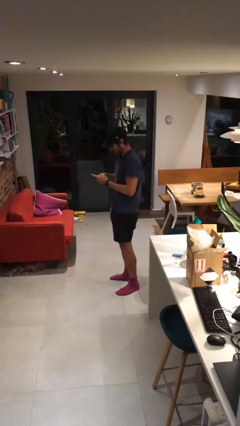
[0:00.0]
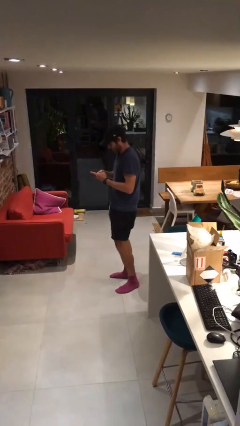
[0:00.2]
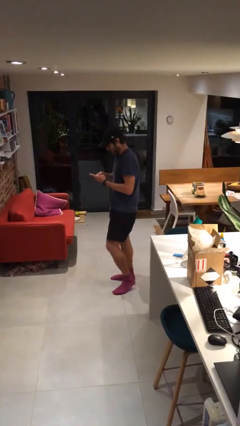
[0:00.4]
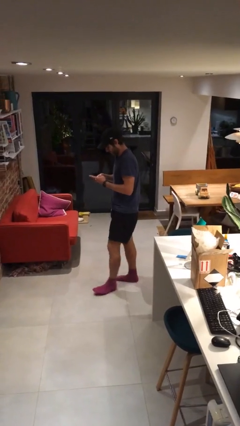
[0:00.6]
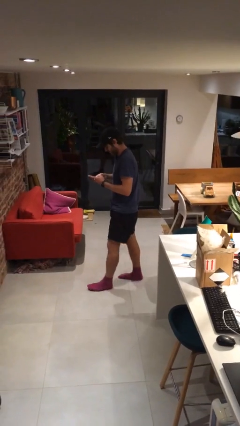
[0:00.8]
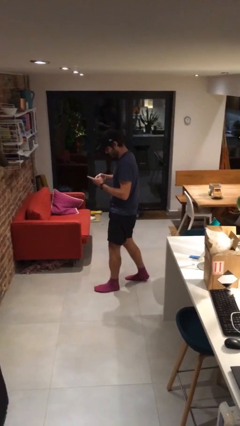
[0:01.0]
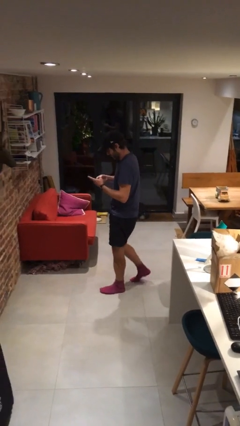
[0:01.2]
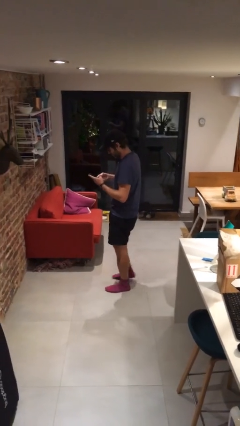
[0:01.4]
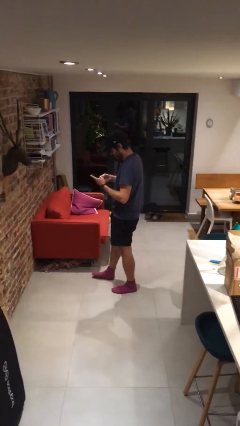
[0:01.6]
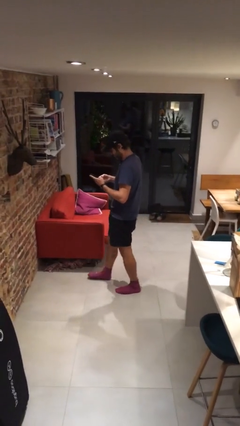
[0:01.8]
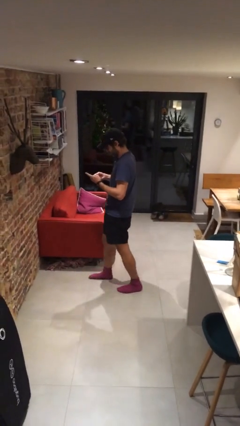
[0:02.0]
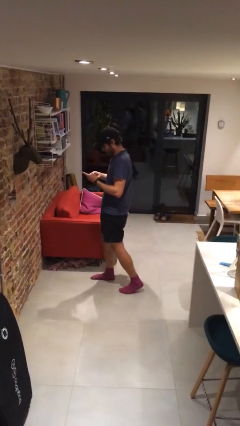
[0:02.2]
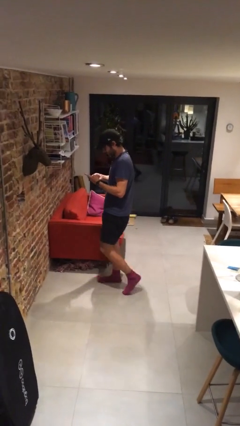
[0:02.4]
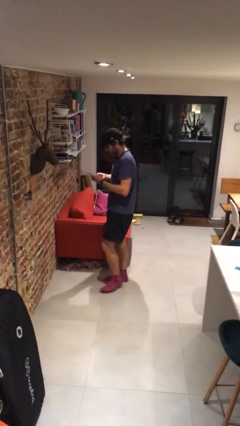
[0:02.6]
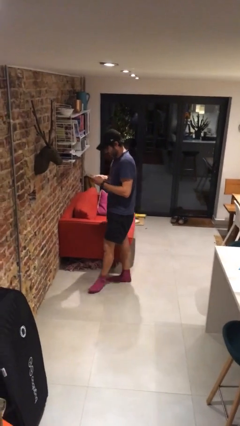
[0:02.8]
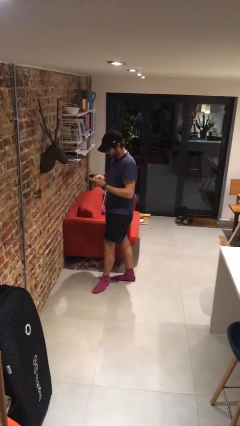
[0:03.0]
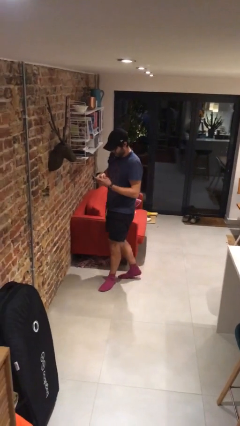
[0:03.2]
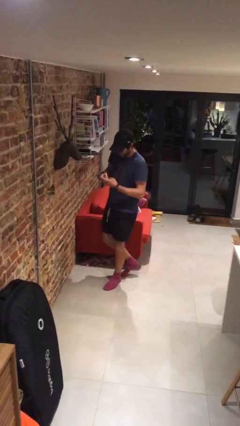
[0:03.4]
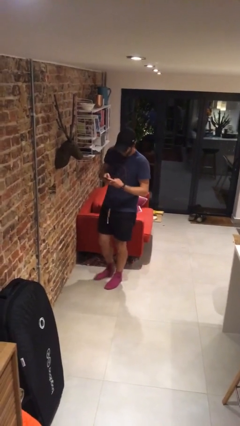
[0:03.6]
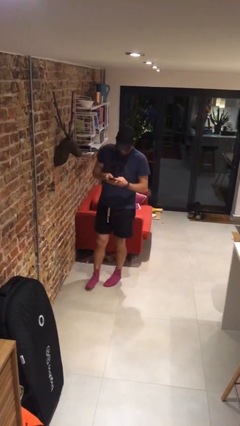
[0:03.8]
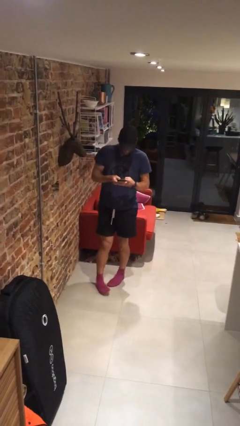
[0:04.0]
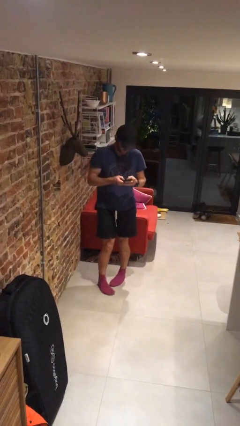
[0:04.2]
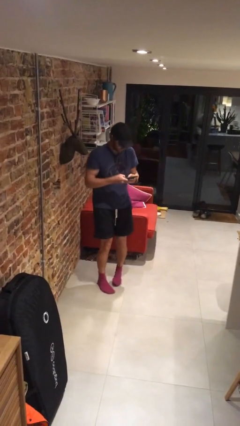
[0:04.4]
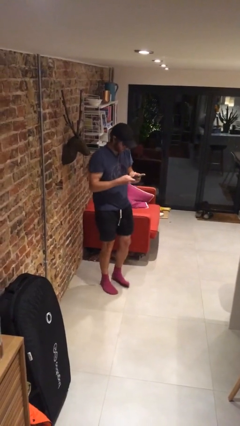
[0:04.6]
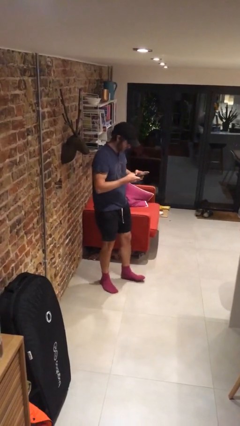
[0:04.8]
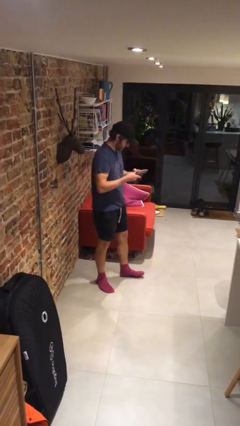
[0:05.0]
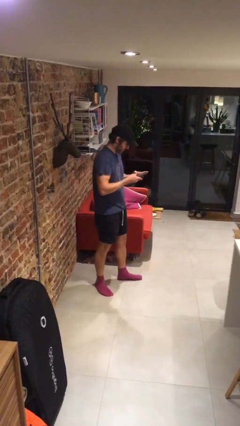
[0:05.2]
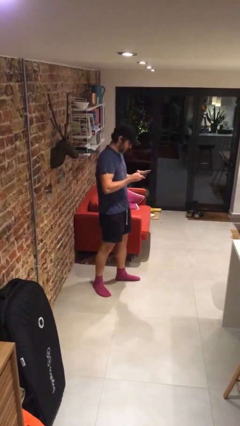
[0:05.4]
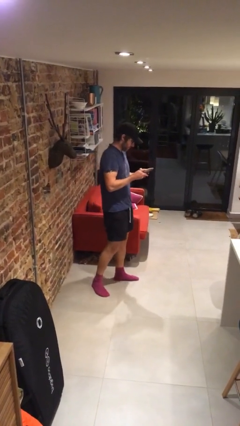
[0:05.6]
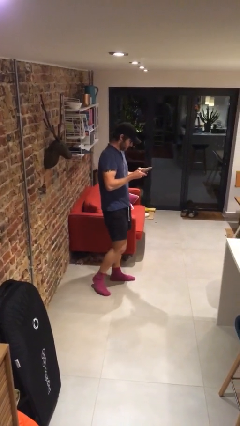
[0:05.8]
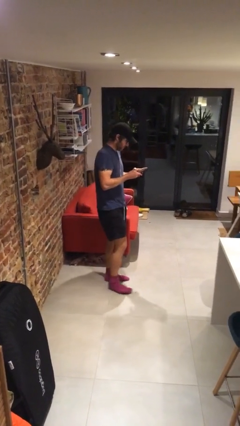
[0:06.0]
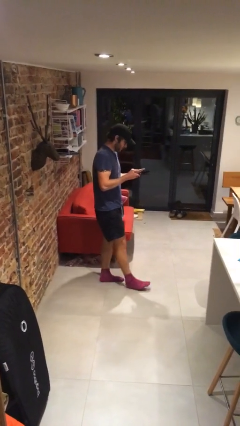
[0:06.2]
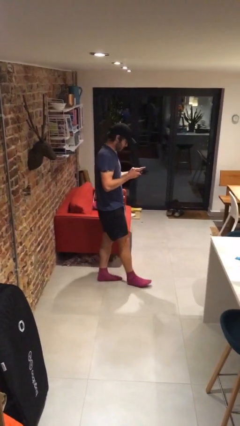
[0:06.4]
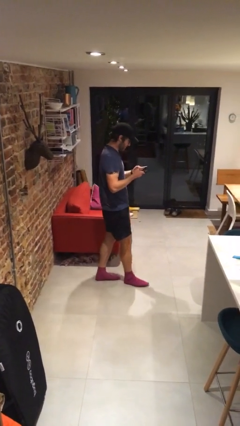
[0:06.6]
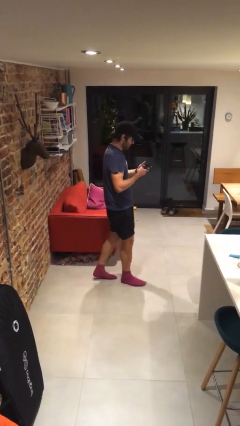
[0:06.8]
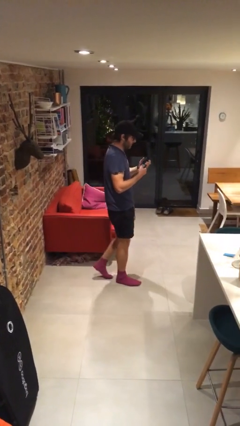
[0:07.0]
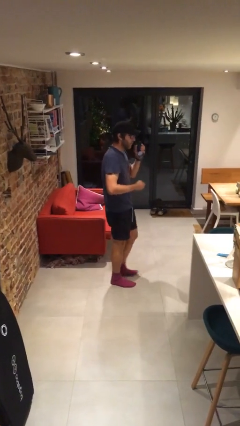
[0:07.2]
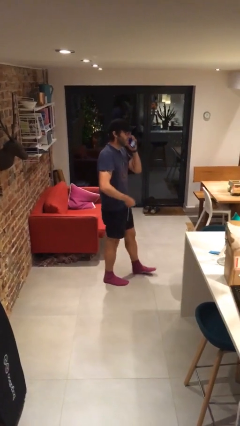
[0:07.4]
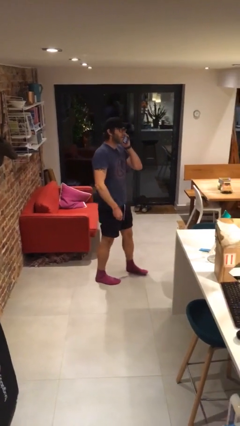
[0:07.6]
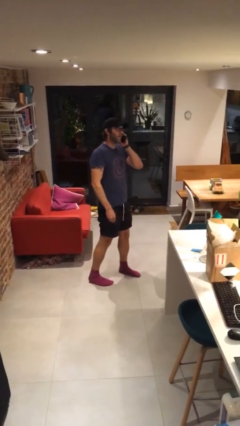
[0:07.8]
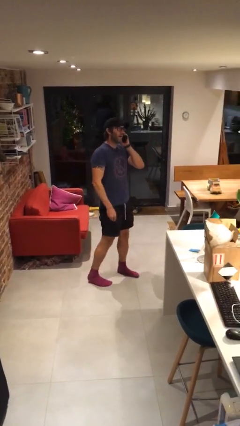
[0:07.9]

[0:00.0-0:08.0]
person texts on phone

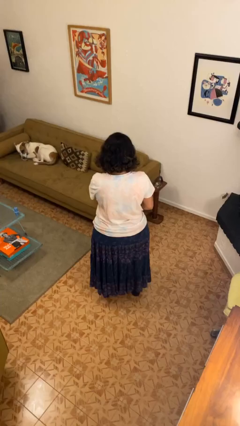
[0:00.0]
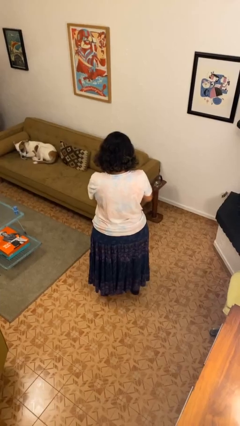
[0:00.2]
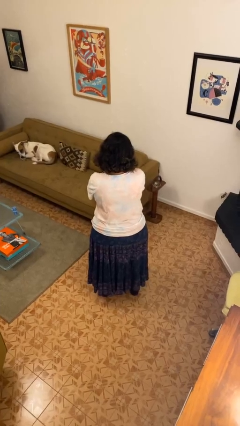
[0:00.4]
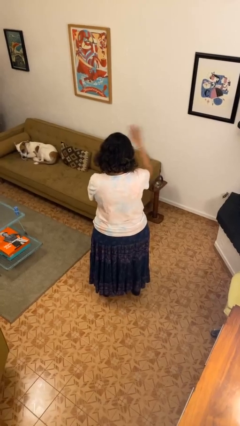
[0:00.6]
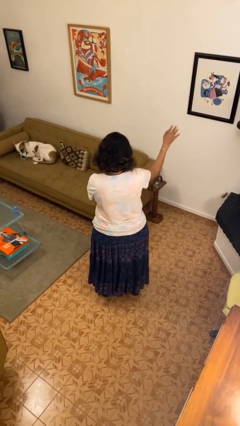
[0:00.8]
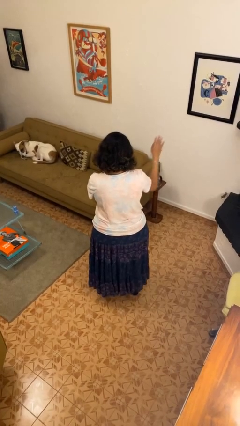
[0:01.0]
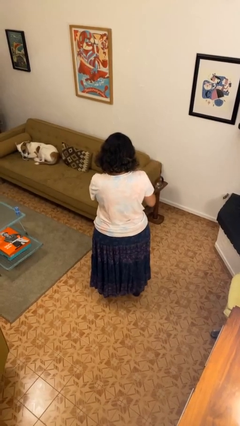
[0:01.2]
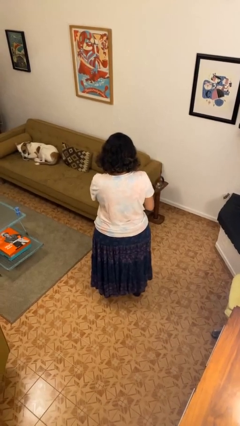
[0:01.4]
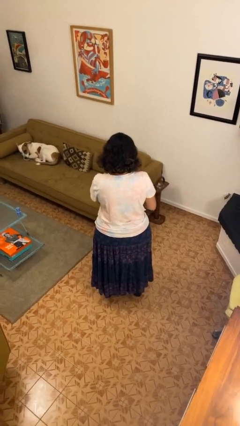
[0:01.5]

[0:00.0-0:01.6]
person gestures swipe right

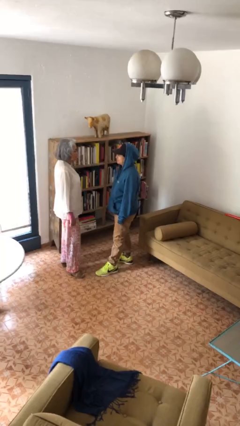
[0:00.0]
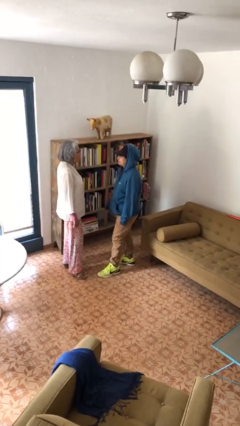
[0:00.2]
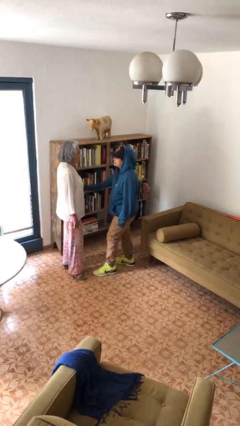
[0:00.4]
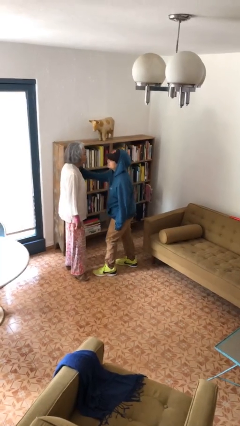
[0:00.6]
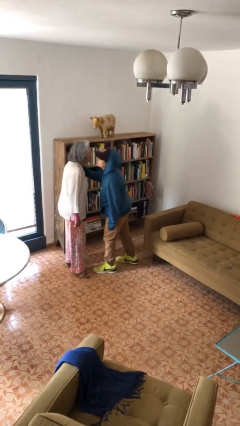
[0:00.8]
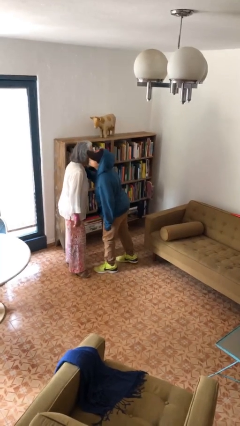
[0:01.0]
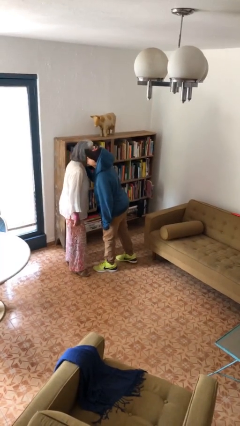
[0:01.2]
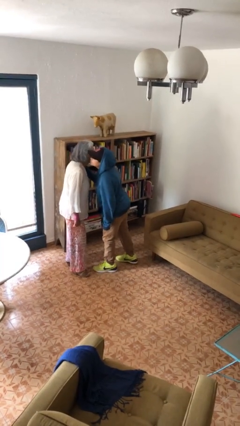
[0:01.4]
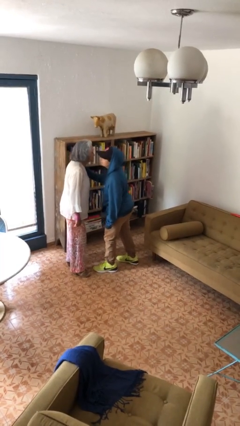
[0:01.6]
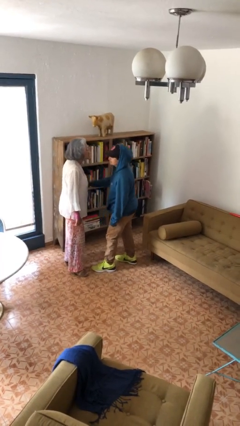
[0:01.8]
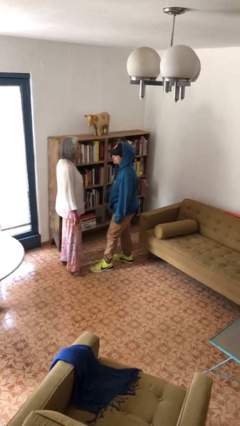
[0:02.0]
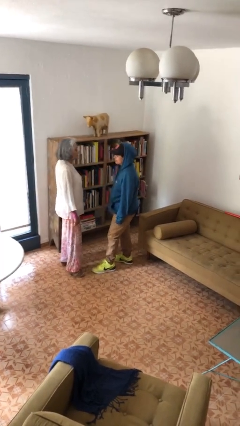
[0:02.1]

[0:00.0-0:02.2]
person kisses cheek of person

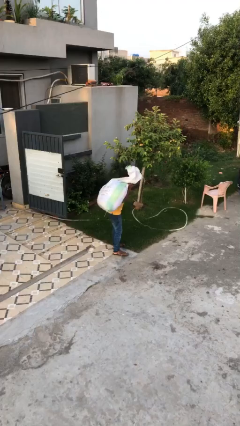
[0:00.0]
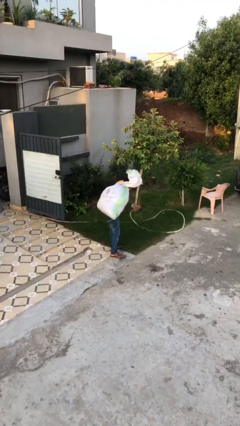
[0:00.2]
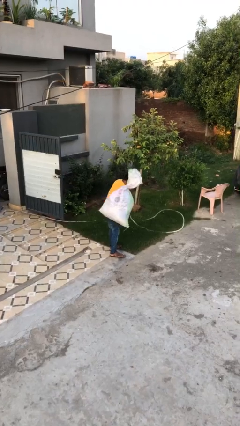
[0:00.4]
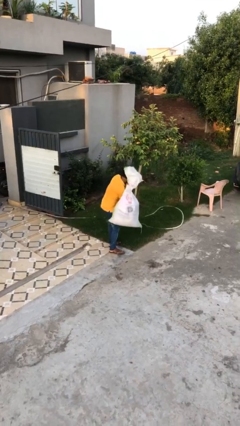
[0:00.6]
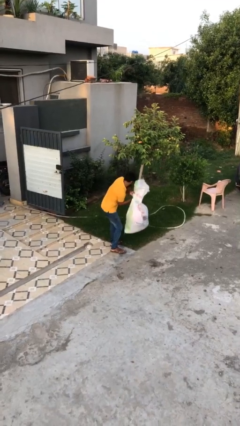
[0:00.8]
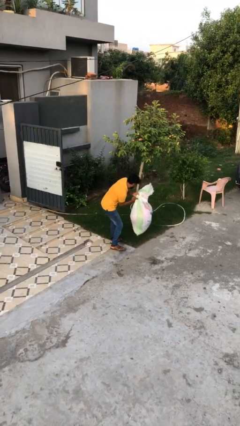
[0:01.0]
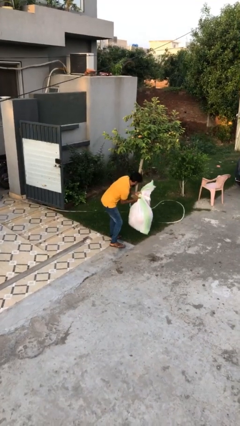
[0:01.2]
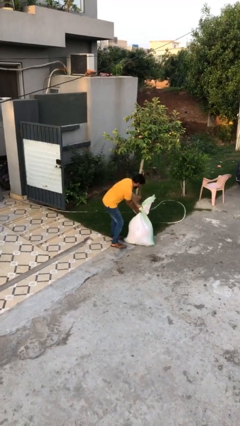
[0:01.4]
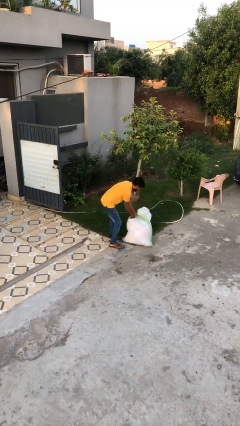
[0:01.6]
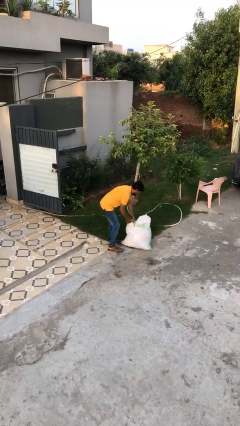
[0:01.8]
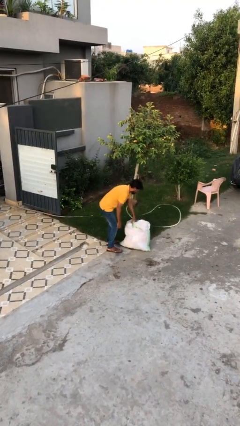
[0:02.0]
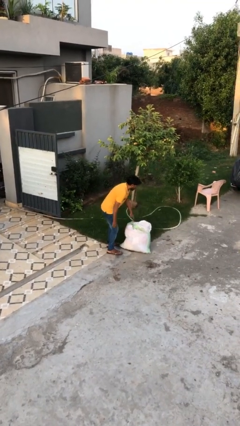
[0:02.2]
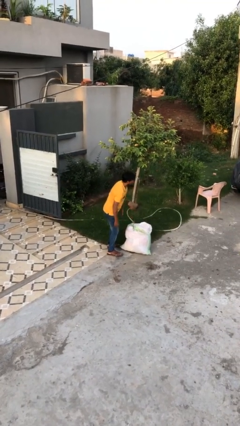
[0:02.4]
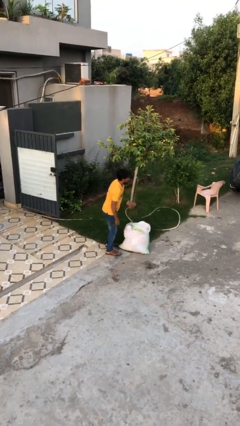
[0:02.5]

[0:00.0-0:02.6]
person puts down object on floor

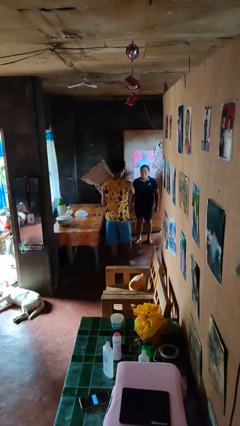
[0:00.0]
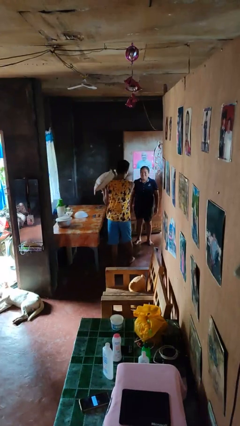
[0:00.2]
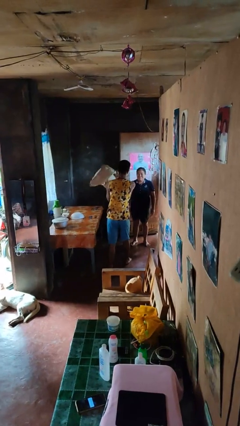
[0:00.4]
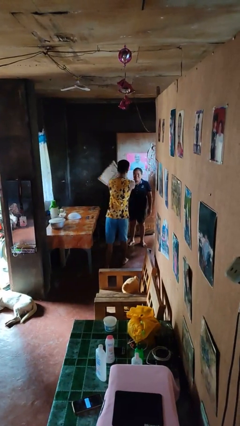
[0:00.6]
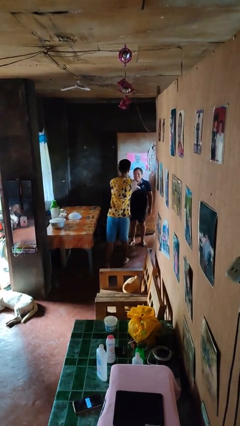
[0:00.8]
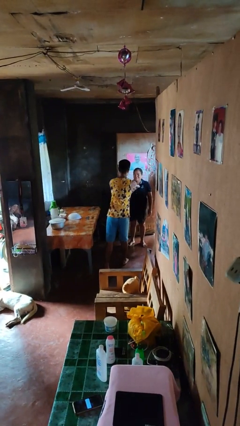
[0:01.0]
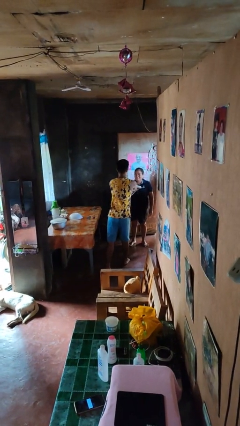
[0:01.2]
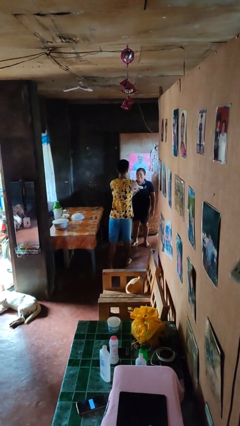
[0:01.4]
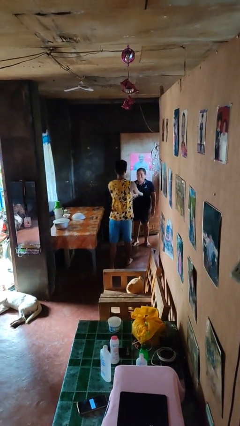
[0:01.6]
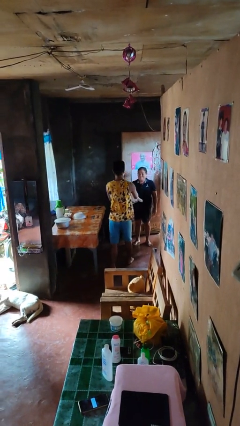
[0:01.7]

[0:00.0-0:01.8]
person hits person with pillow

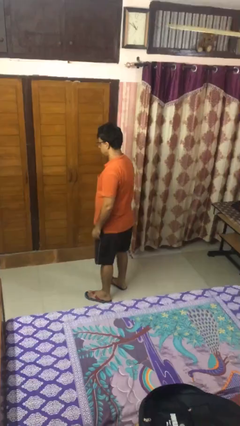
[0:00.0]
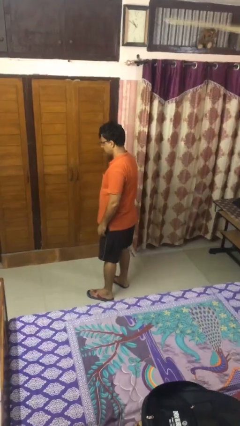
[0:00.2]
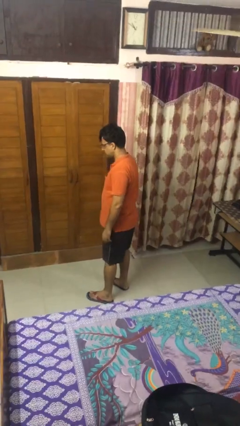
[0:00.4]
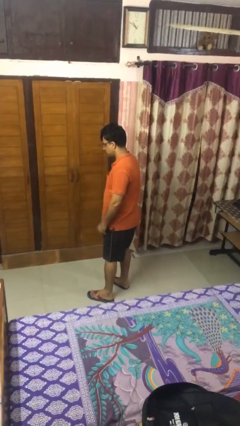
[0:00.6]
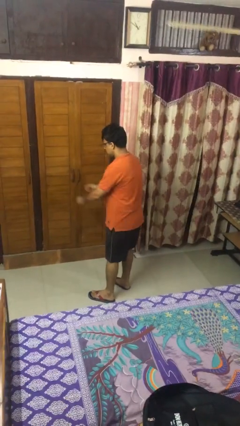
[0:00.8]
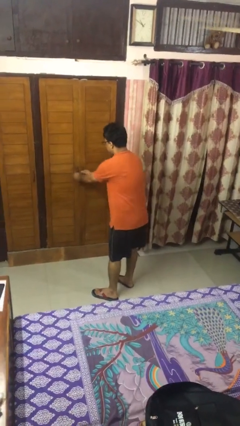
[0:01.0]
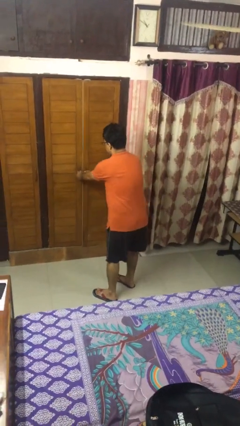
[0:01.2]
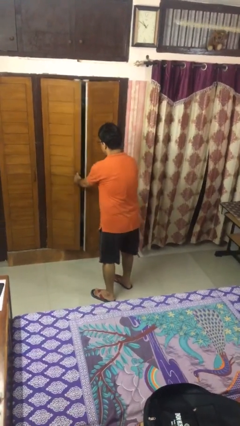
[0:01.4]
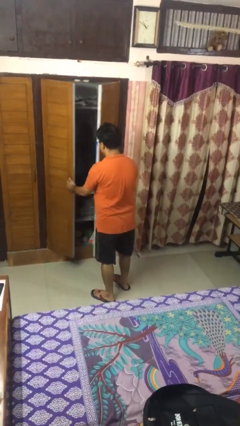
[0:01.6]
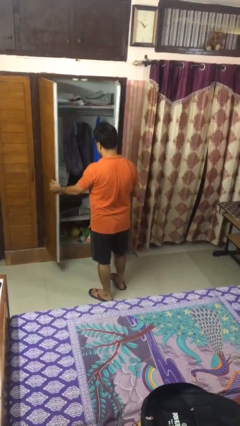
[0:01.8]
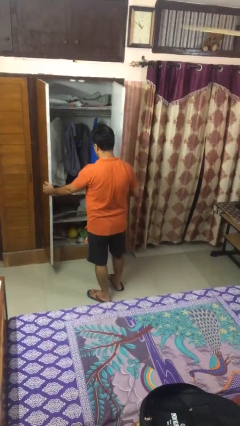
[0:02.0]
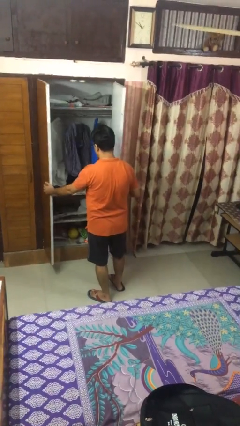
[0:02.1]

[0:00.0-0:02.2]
person opens closet door
